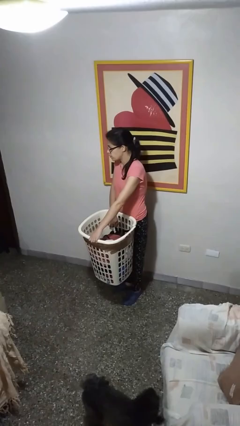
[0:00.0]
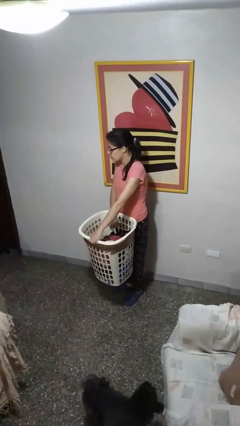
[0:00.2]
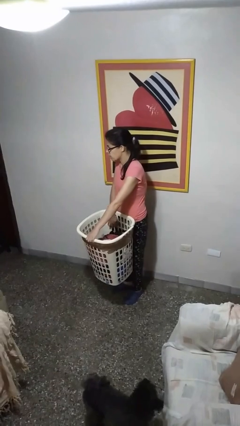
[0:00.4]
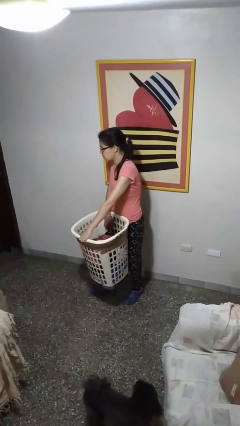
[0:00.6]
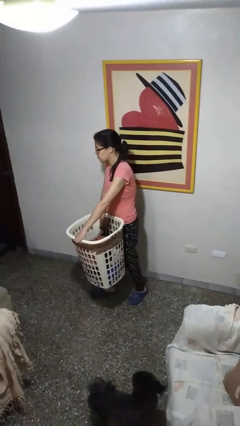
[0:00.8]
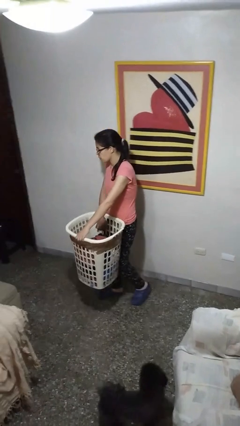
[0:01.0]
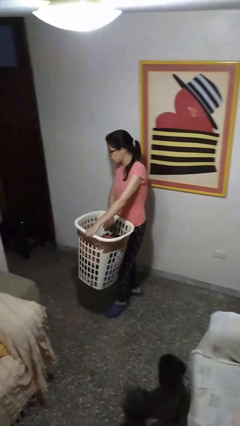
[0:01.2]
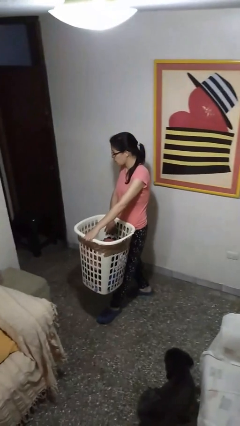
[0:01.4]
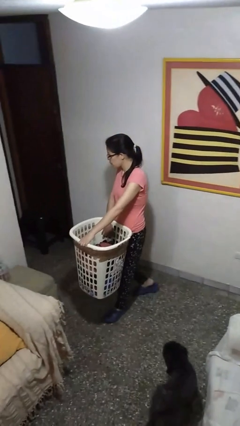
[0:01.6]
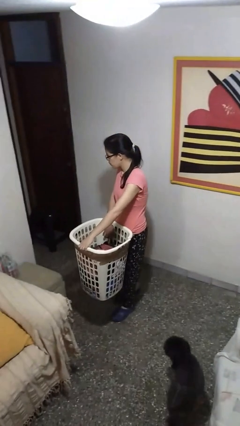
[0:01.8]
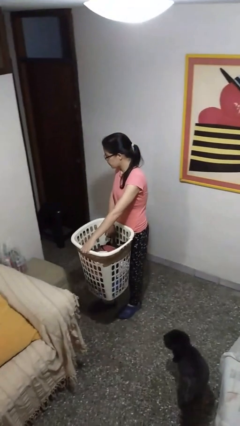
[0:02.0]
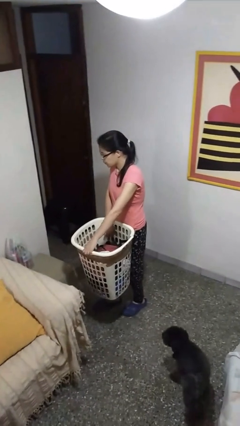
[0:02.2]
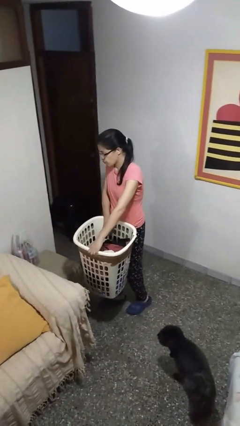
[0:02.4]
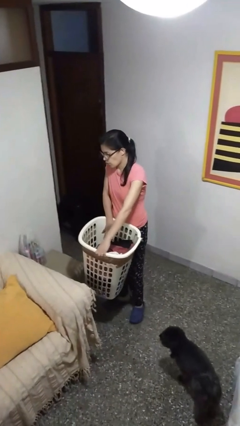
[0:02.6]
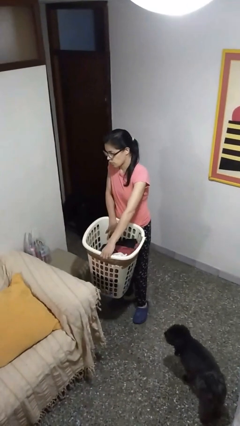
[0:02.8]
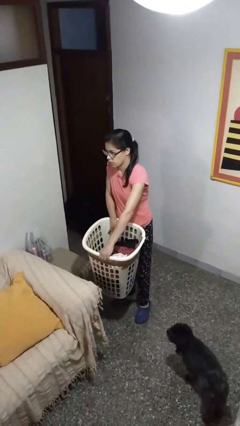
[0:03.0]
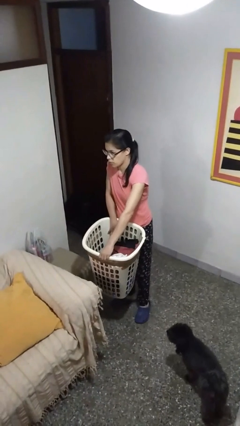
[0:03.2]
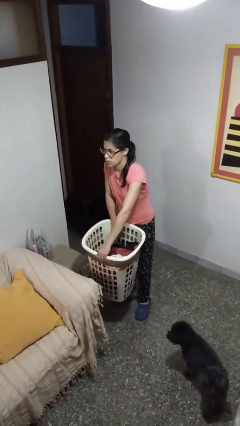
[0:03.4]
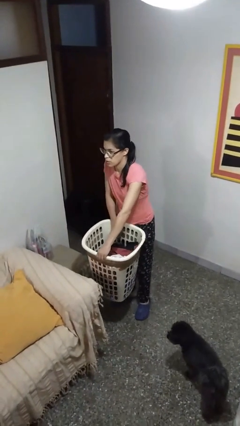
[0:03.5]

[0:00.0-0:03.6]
person carries laundry basket

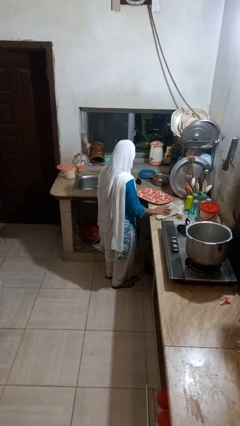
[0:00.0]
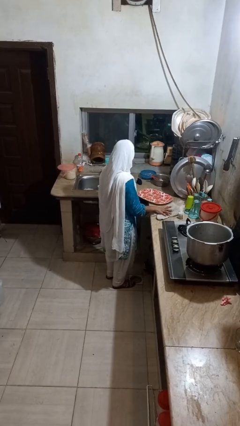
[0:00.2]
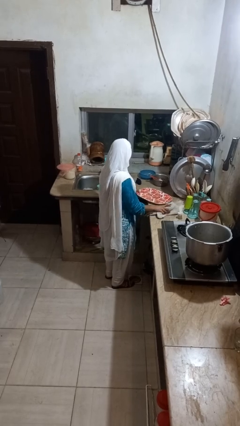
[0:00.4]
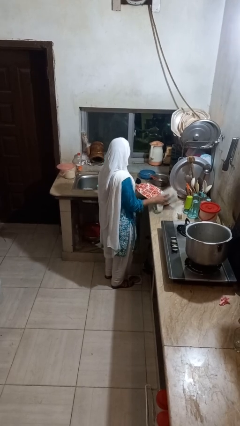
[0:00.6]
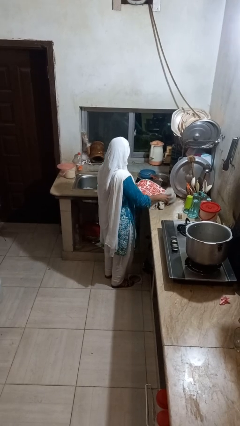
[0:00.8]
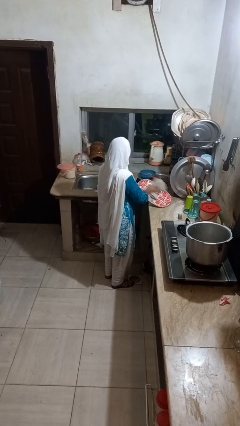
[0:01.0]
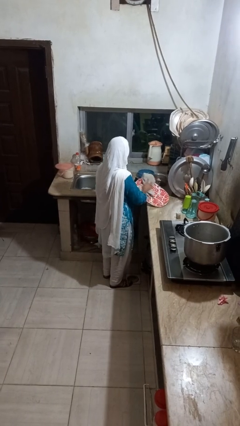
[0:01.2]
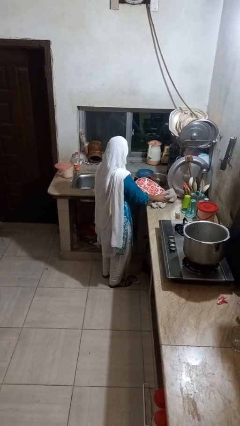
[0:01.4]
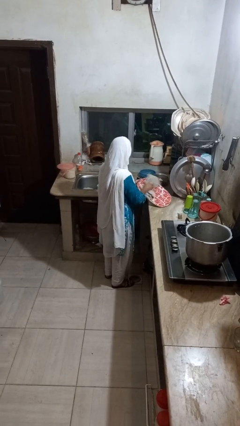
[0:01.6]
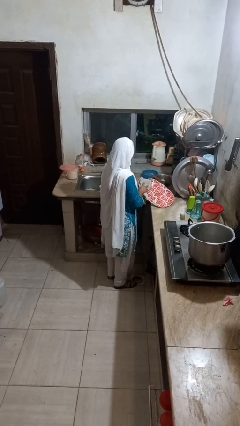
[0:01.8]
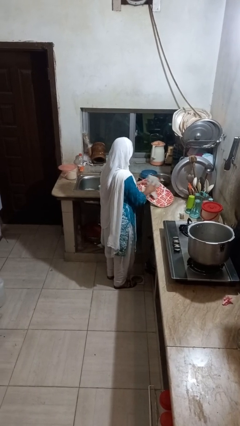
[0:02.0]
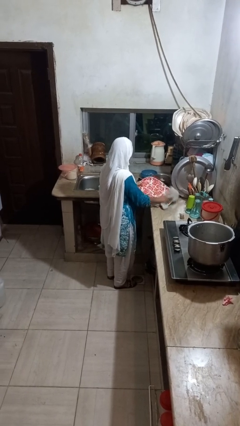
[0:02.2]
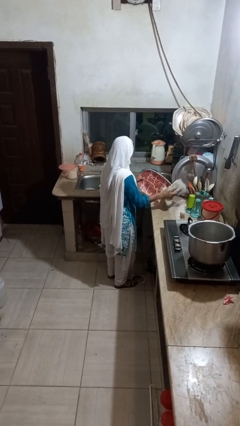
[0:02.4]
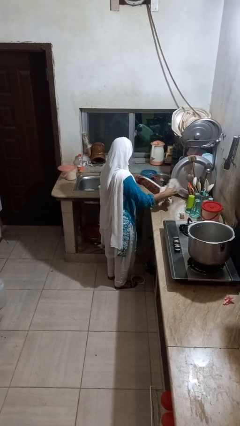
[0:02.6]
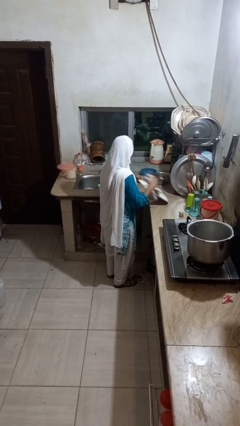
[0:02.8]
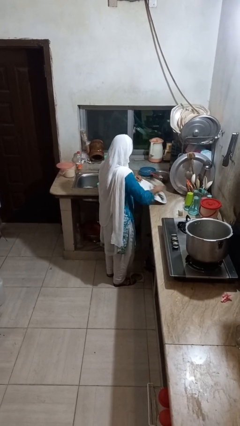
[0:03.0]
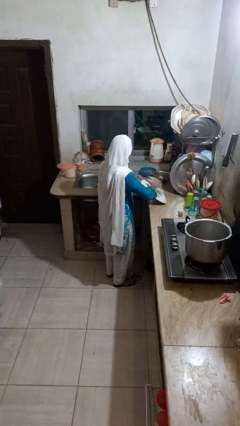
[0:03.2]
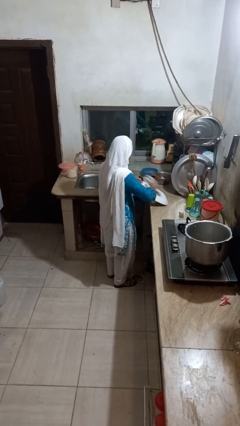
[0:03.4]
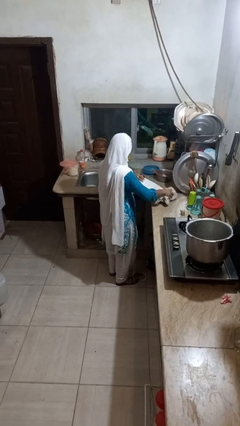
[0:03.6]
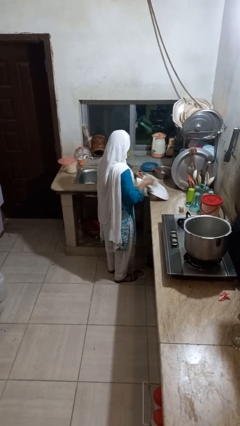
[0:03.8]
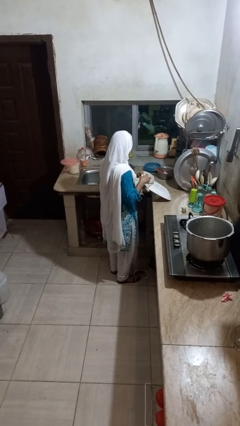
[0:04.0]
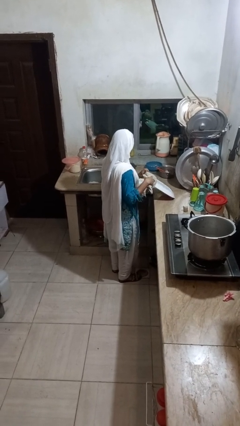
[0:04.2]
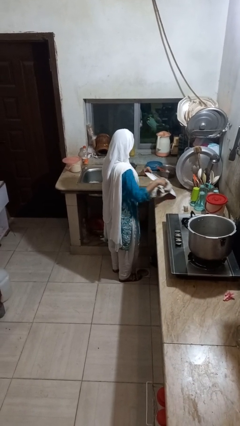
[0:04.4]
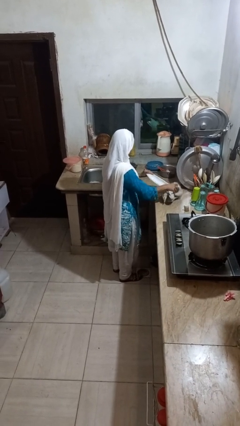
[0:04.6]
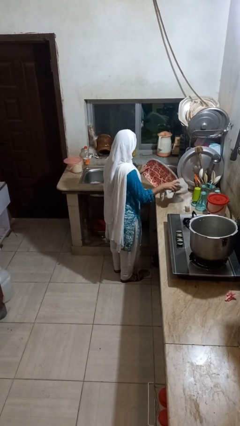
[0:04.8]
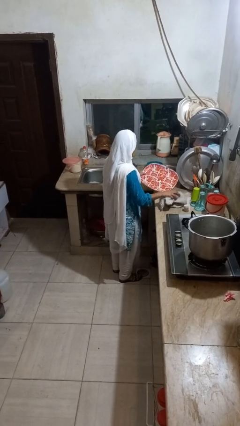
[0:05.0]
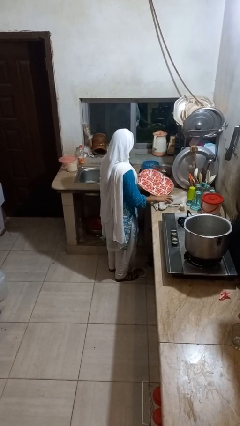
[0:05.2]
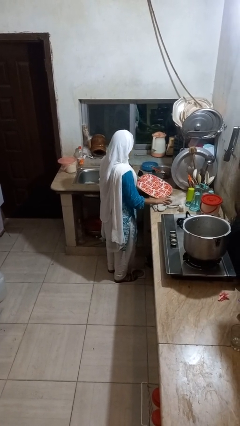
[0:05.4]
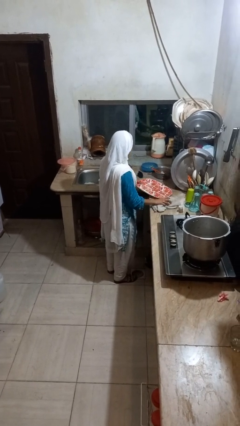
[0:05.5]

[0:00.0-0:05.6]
person dries dish

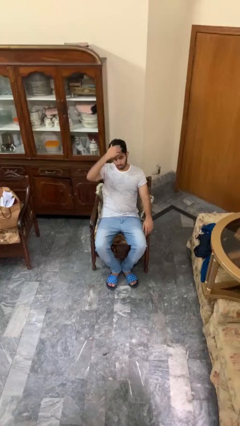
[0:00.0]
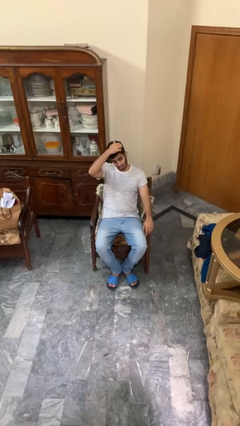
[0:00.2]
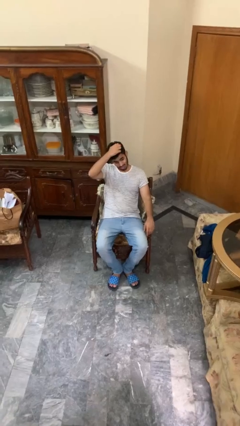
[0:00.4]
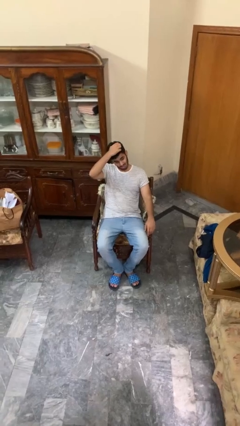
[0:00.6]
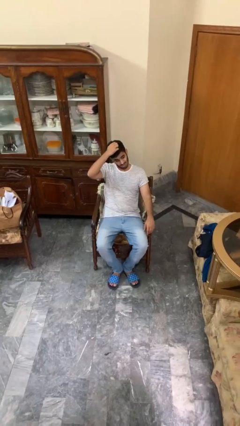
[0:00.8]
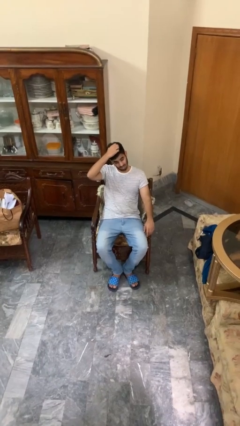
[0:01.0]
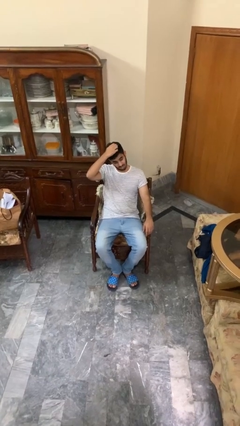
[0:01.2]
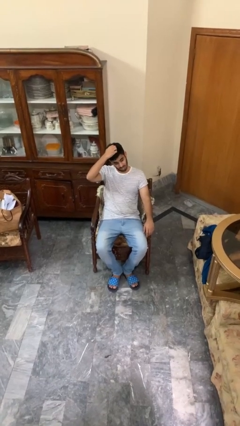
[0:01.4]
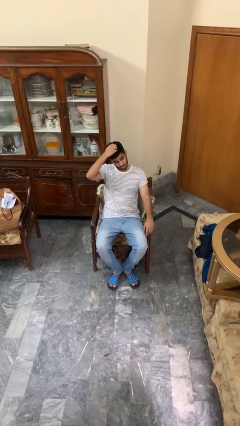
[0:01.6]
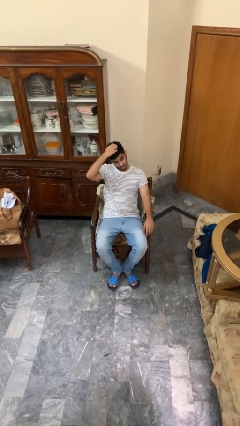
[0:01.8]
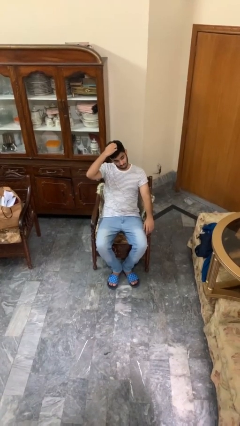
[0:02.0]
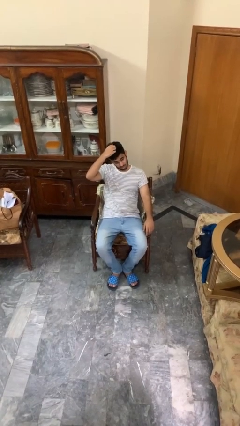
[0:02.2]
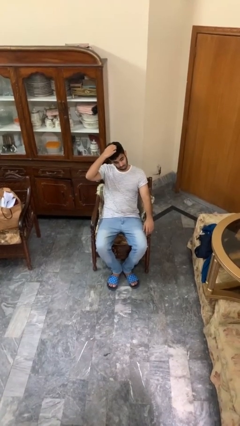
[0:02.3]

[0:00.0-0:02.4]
person strokes hair

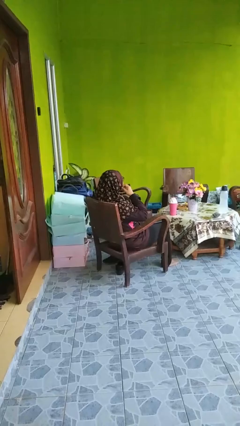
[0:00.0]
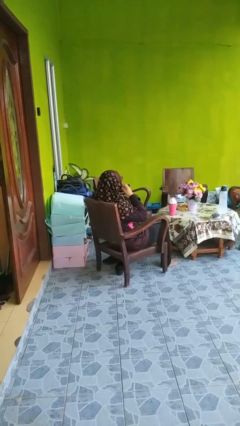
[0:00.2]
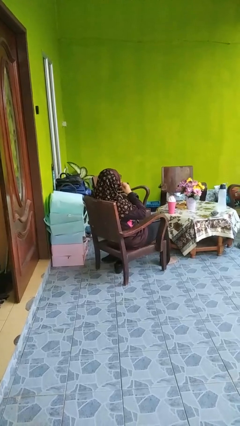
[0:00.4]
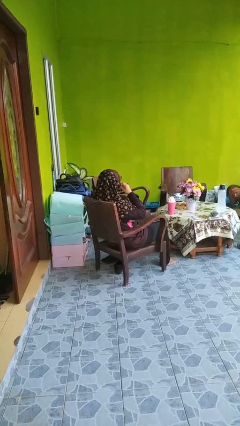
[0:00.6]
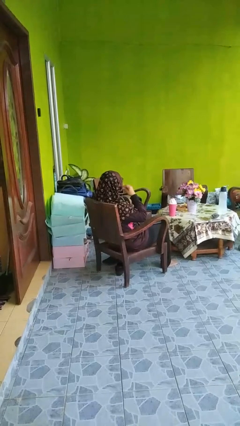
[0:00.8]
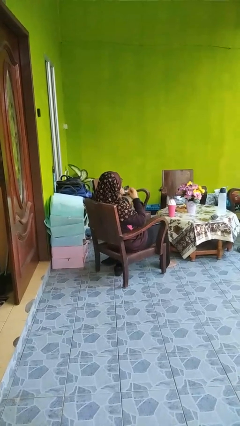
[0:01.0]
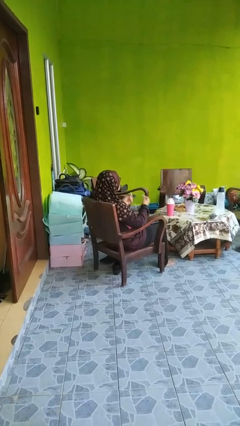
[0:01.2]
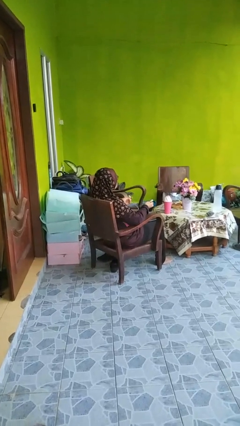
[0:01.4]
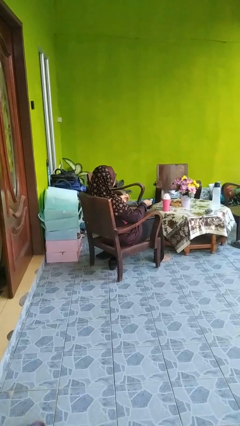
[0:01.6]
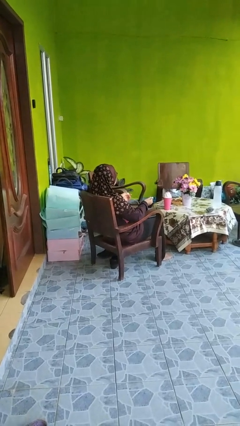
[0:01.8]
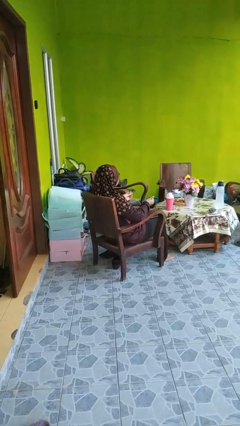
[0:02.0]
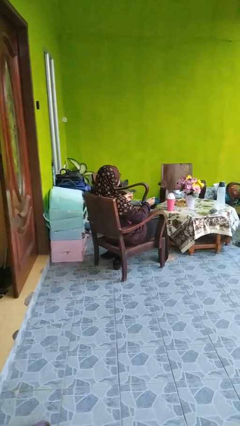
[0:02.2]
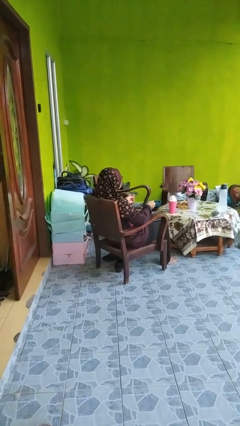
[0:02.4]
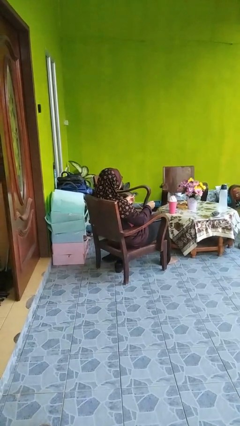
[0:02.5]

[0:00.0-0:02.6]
person takes off headphones

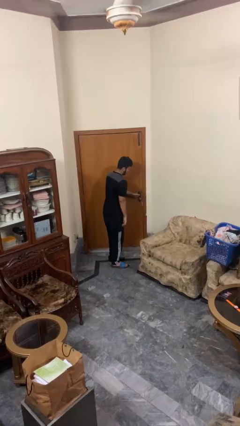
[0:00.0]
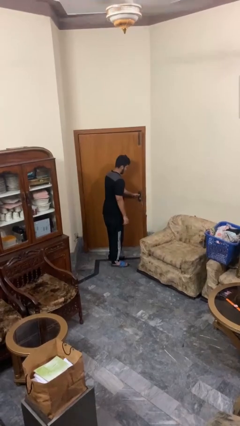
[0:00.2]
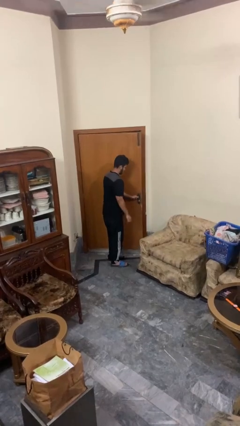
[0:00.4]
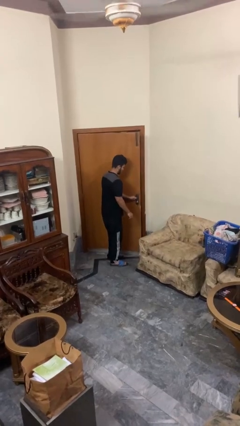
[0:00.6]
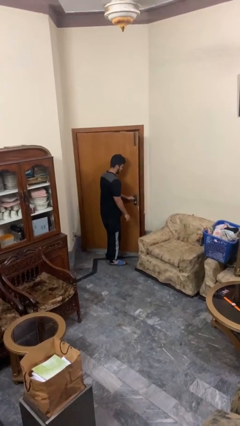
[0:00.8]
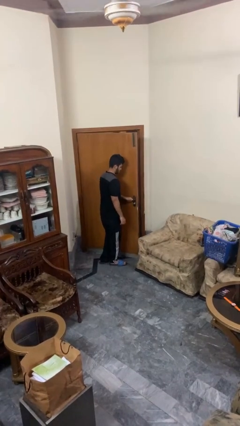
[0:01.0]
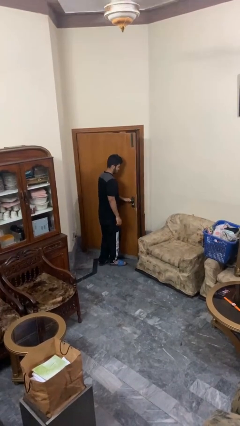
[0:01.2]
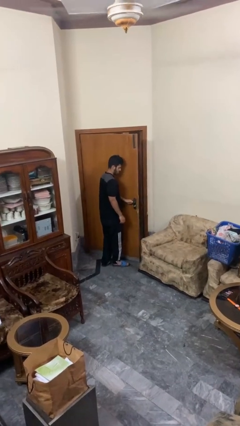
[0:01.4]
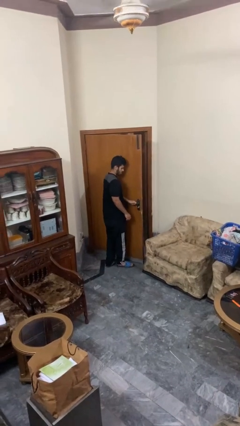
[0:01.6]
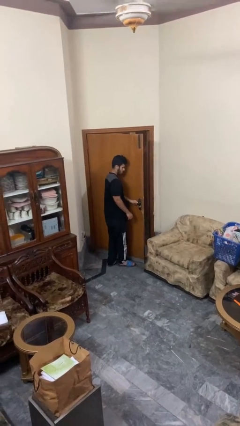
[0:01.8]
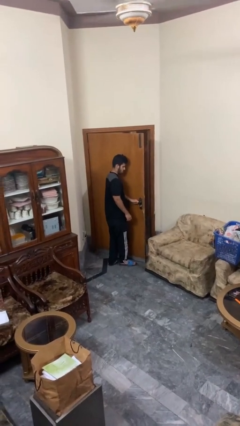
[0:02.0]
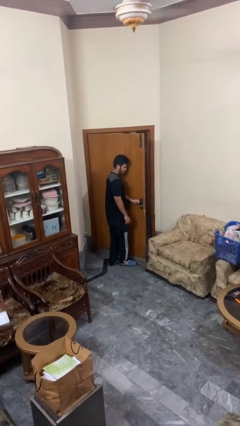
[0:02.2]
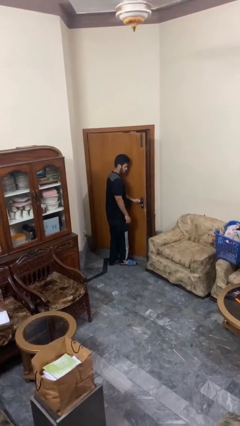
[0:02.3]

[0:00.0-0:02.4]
person opens facility door

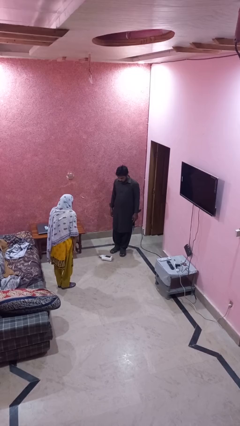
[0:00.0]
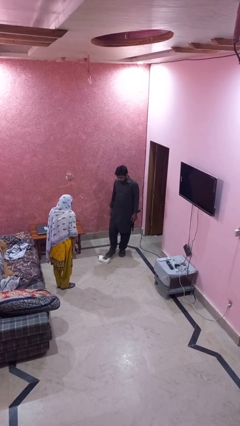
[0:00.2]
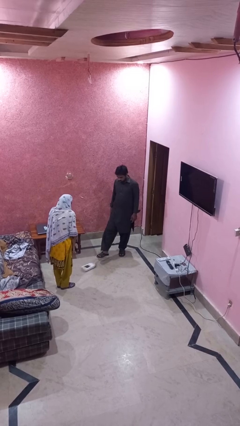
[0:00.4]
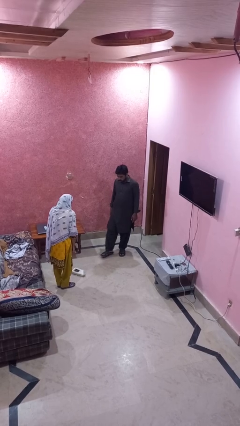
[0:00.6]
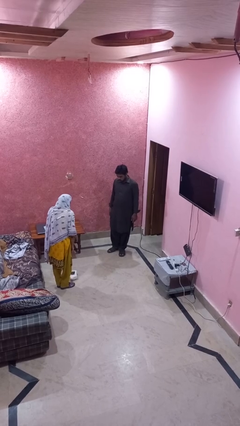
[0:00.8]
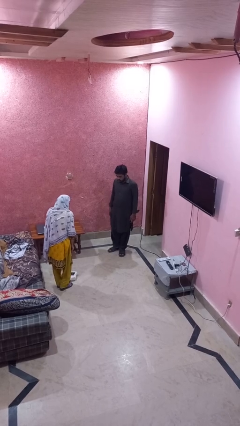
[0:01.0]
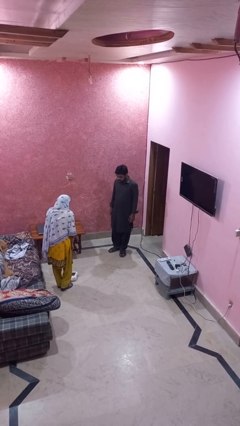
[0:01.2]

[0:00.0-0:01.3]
person kicks object to person

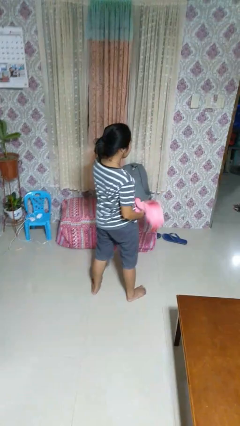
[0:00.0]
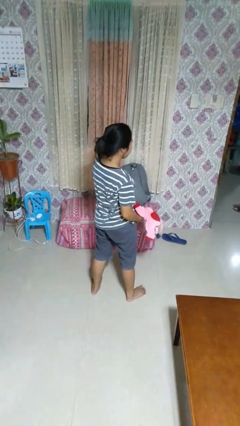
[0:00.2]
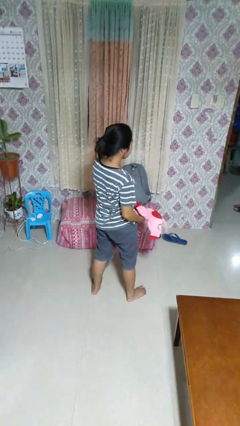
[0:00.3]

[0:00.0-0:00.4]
person catches dropped object
